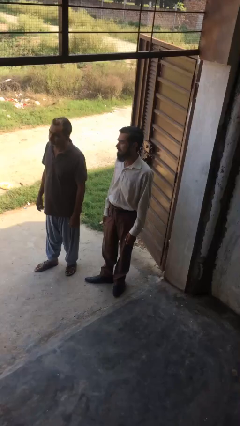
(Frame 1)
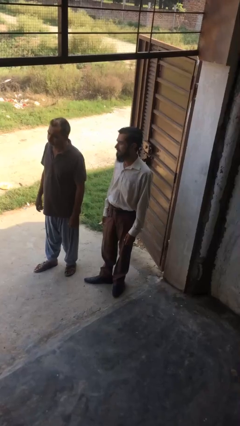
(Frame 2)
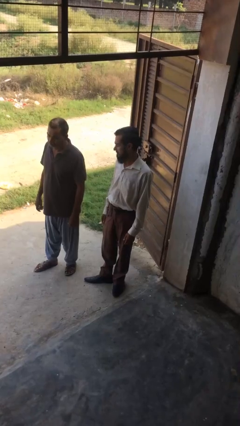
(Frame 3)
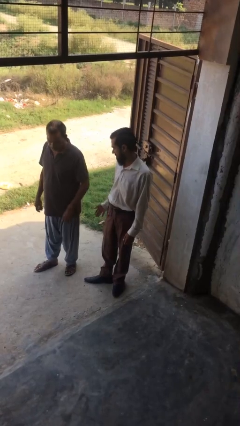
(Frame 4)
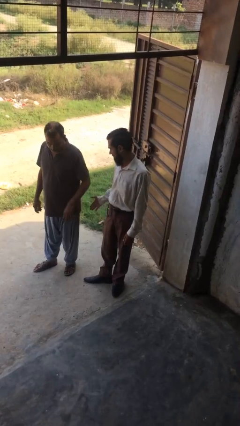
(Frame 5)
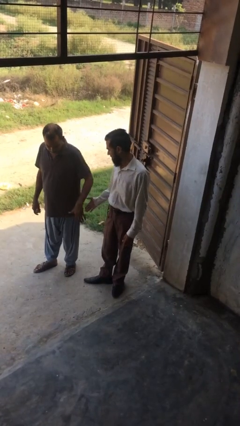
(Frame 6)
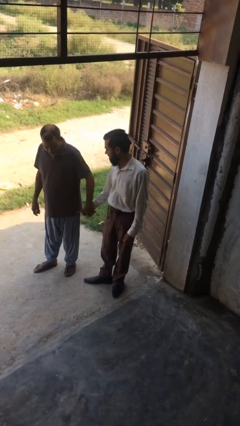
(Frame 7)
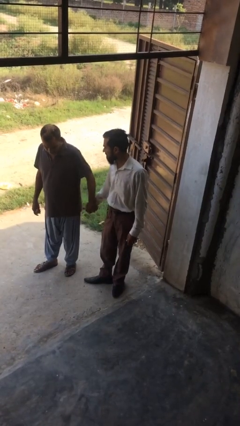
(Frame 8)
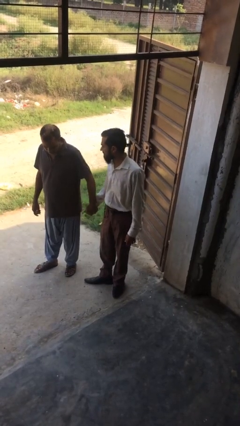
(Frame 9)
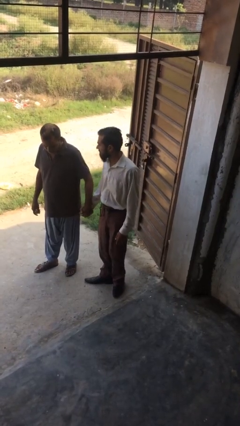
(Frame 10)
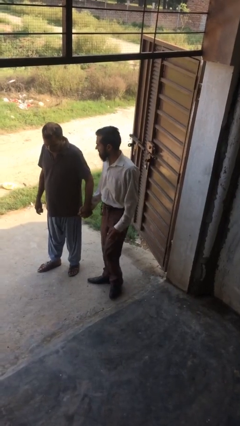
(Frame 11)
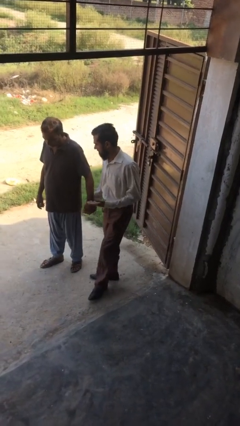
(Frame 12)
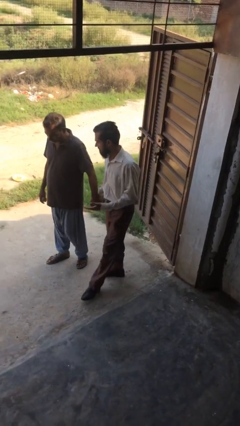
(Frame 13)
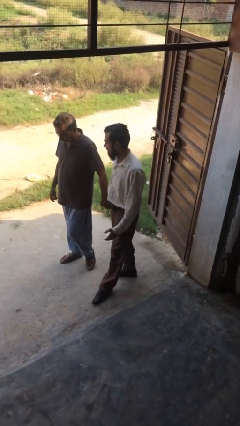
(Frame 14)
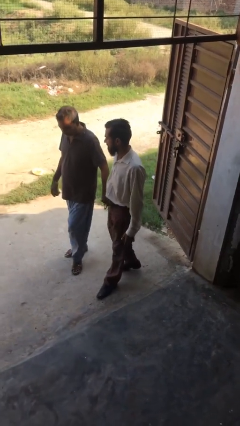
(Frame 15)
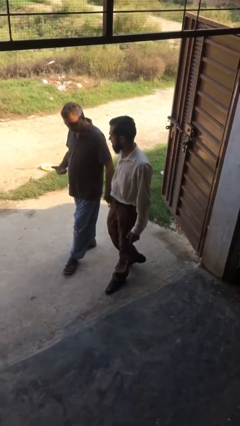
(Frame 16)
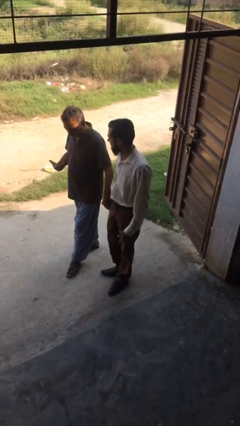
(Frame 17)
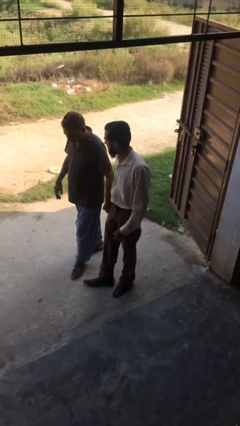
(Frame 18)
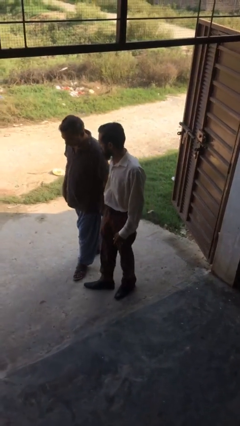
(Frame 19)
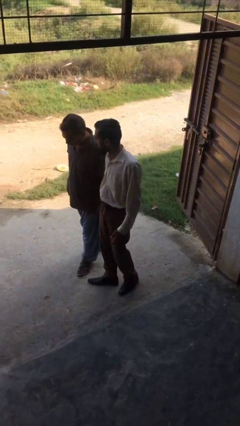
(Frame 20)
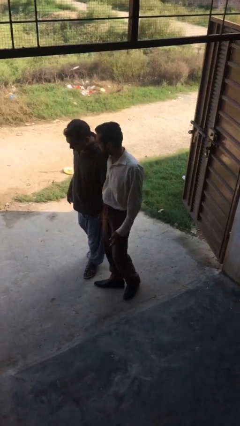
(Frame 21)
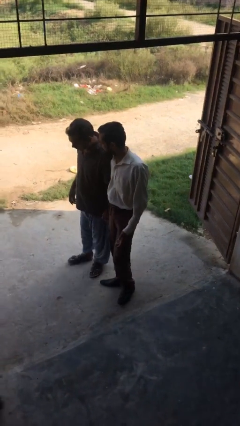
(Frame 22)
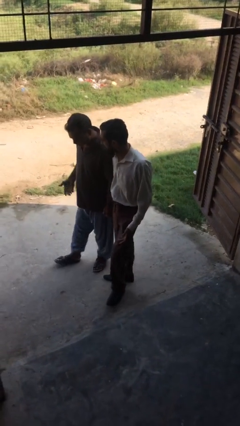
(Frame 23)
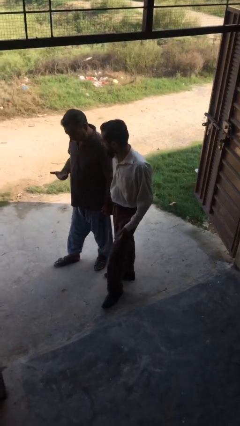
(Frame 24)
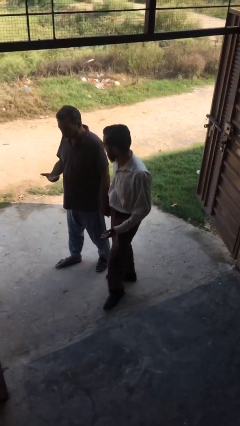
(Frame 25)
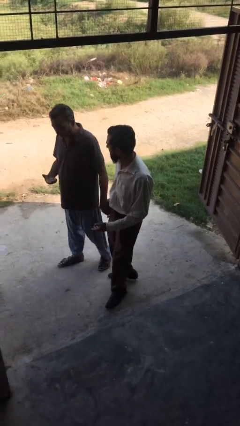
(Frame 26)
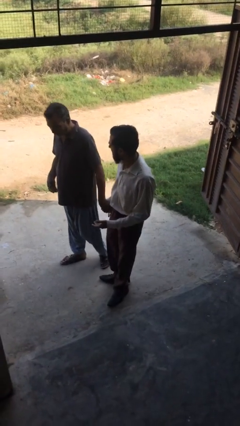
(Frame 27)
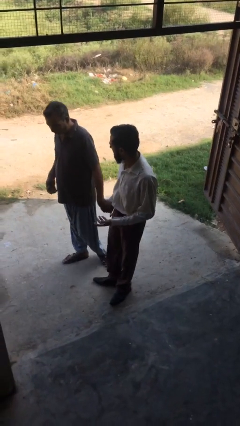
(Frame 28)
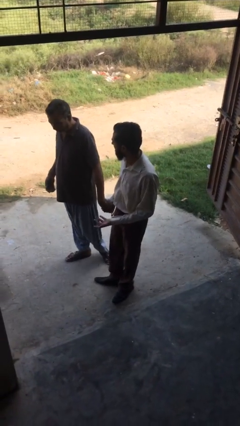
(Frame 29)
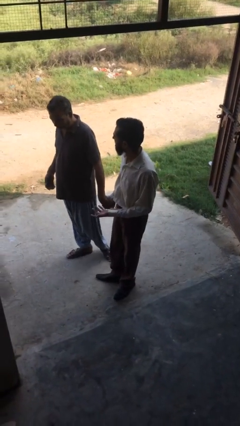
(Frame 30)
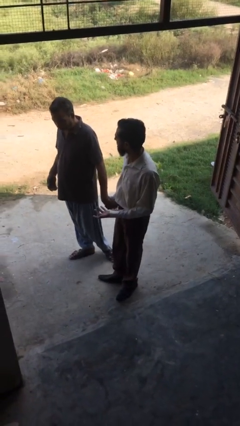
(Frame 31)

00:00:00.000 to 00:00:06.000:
person holds hand

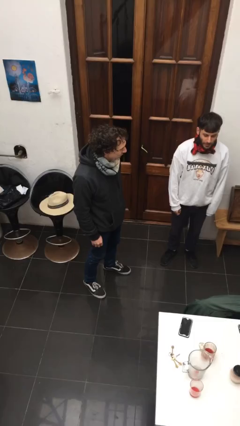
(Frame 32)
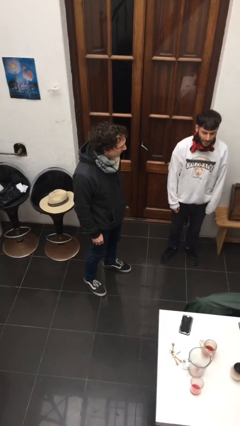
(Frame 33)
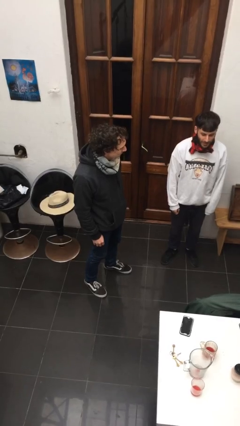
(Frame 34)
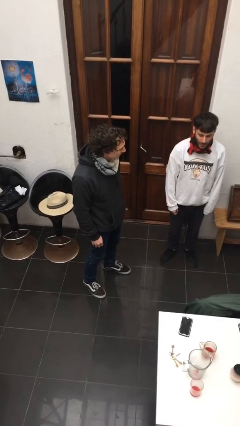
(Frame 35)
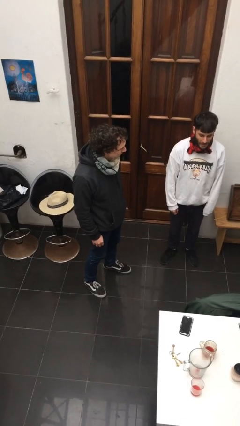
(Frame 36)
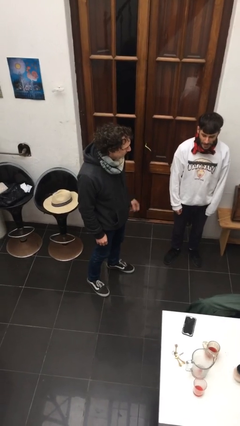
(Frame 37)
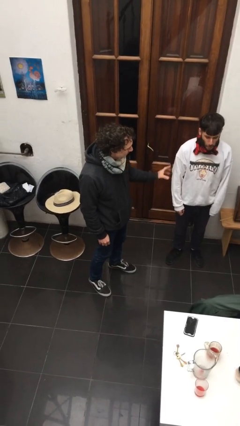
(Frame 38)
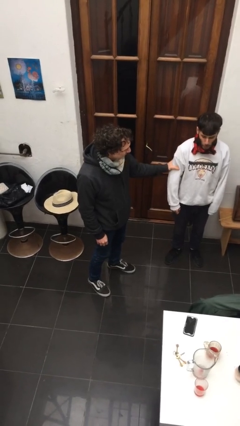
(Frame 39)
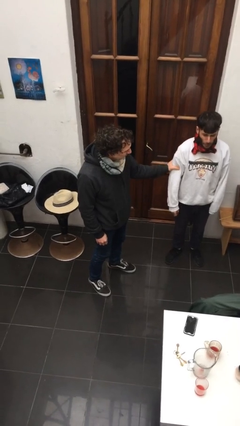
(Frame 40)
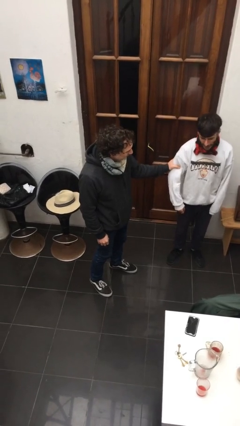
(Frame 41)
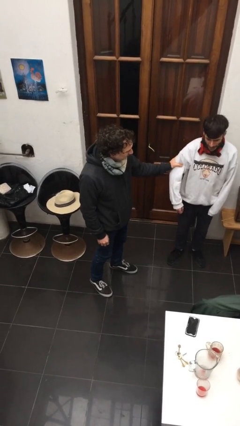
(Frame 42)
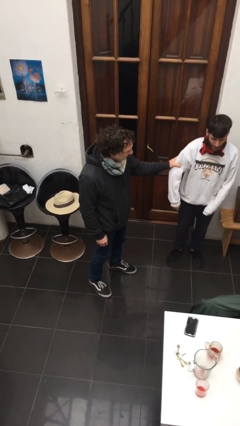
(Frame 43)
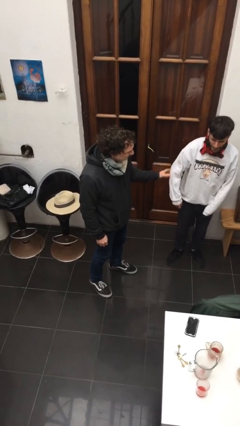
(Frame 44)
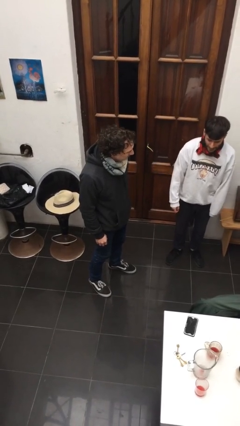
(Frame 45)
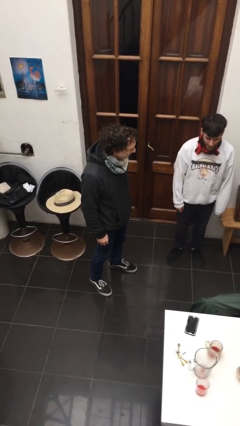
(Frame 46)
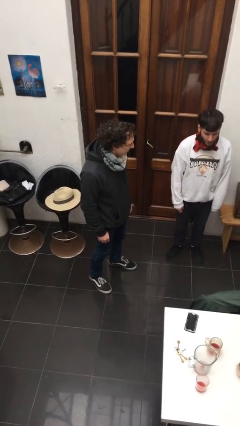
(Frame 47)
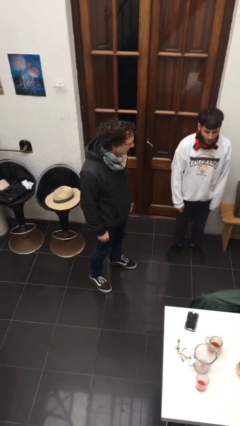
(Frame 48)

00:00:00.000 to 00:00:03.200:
person grabs person by bicep

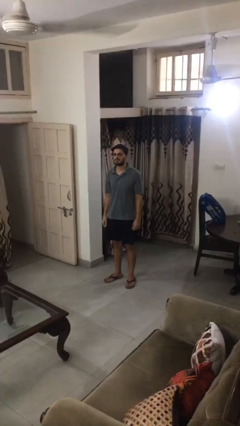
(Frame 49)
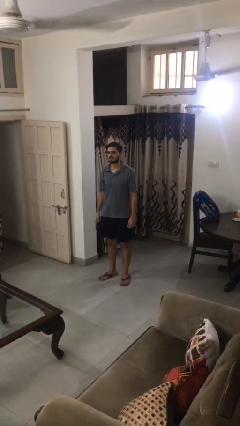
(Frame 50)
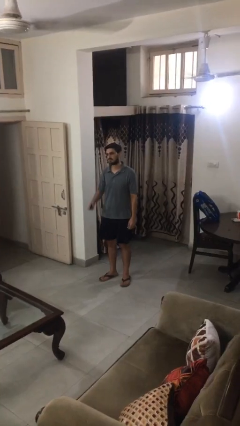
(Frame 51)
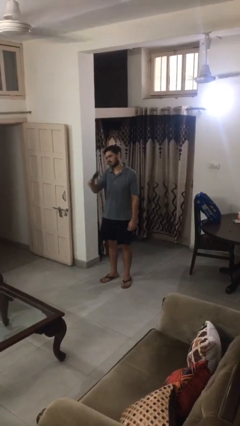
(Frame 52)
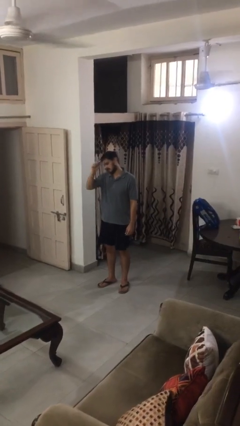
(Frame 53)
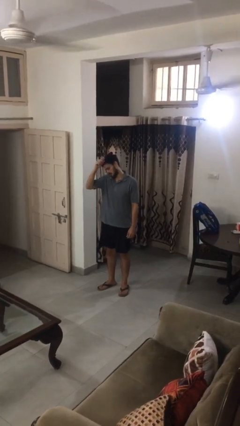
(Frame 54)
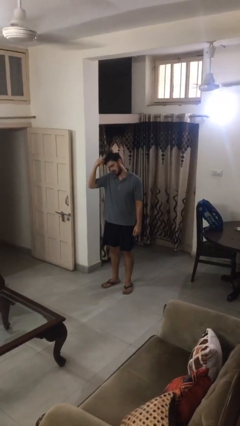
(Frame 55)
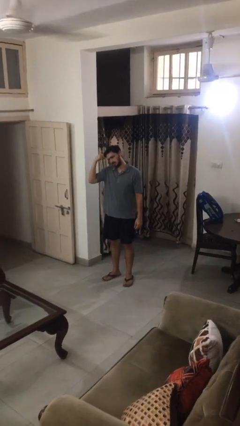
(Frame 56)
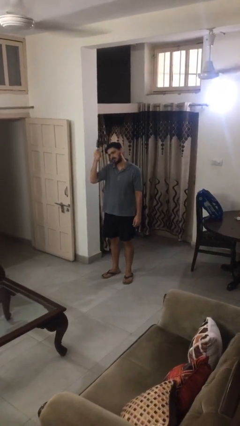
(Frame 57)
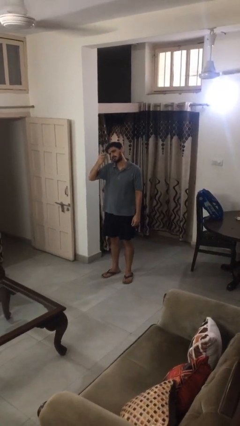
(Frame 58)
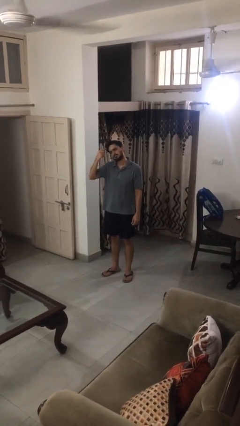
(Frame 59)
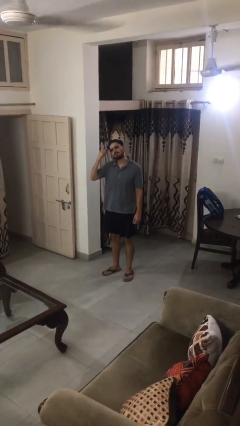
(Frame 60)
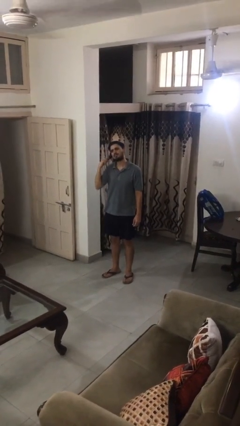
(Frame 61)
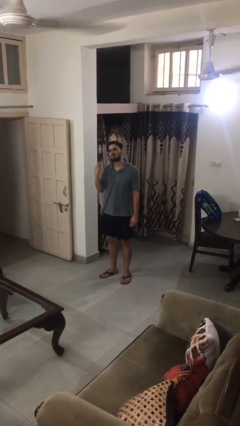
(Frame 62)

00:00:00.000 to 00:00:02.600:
person brushes hair

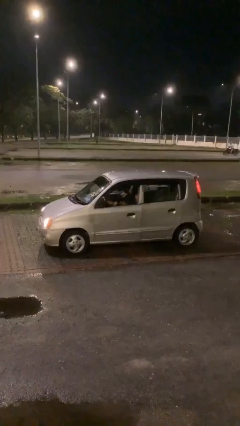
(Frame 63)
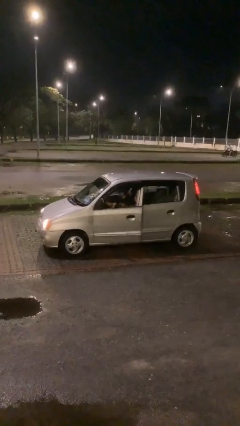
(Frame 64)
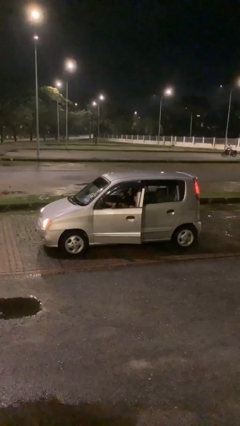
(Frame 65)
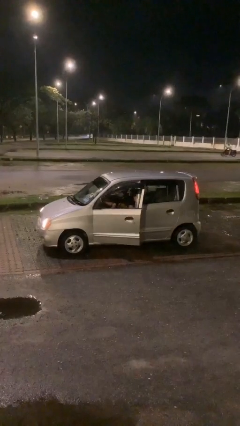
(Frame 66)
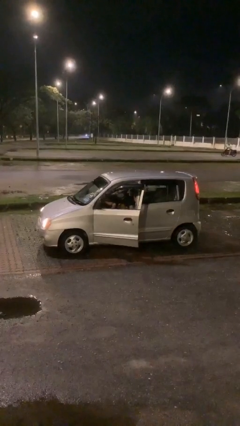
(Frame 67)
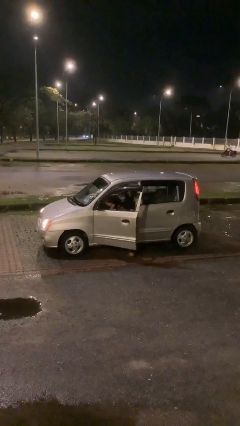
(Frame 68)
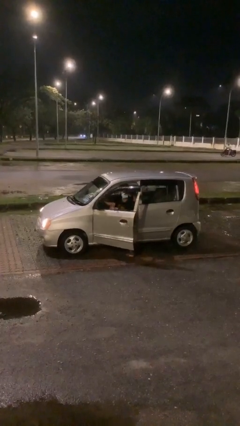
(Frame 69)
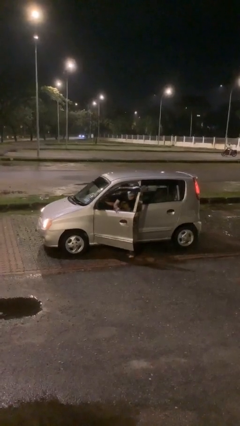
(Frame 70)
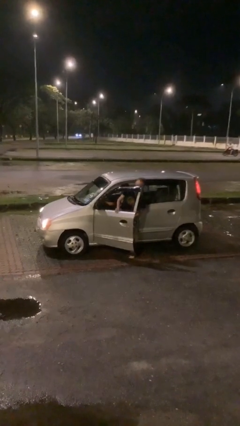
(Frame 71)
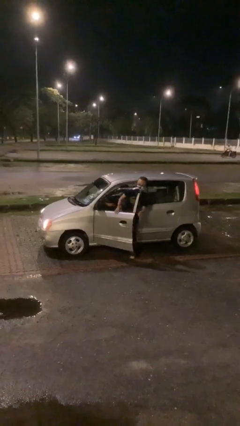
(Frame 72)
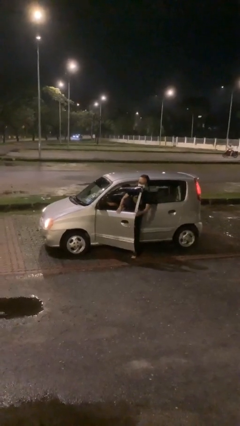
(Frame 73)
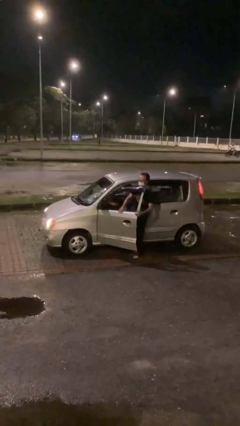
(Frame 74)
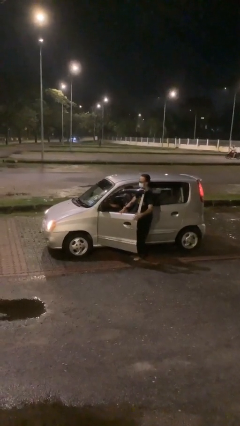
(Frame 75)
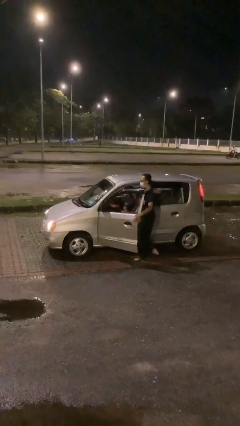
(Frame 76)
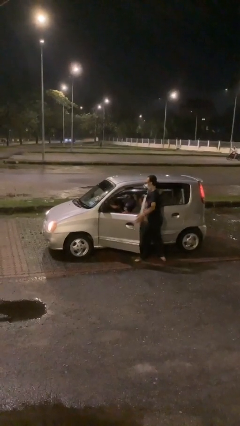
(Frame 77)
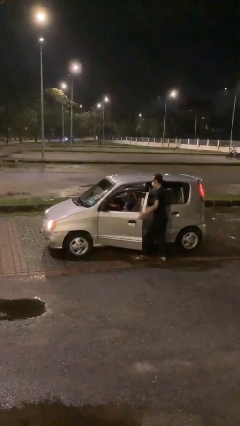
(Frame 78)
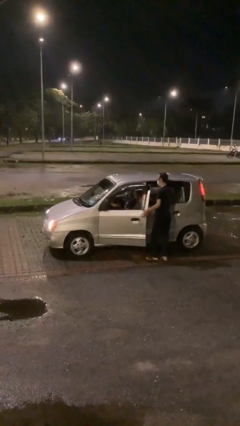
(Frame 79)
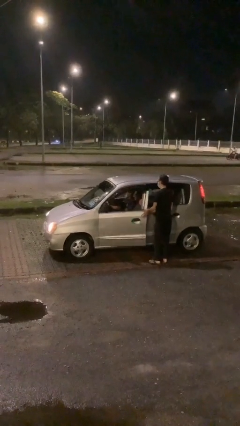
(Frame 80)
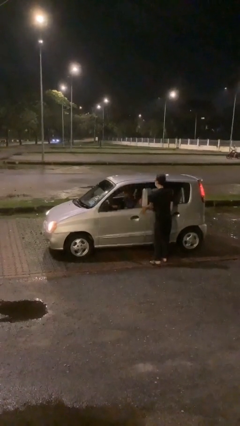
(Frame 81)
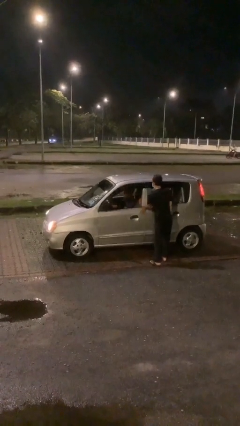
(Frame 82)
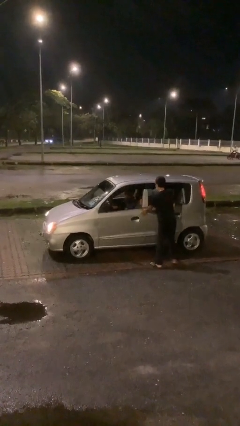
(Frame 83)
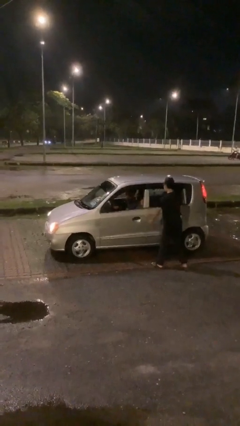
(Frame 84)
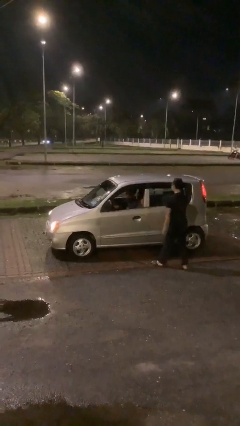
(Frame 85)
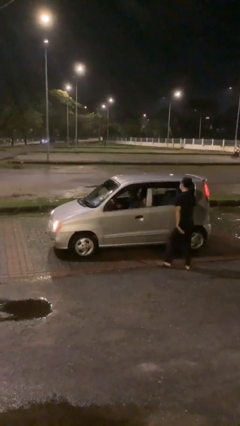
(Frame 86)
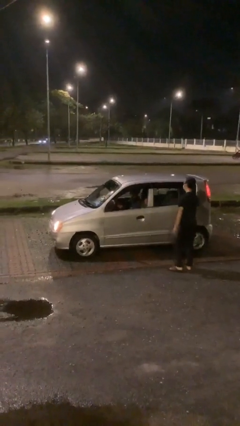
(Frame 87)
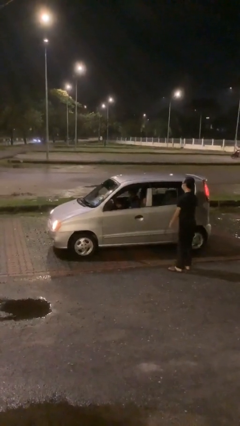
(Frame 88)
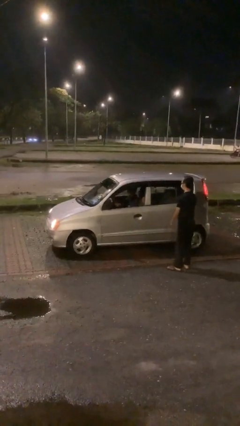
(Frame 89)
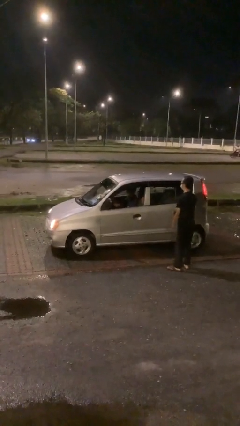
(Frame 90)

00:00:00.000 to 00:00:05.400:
car drops off person

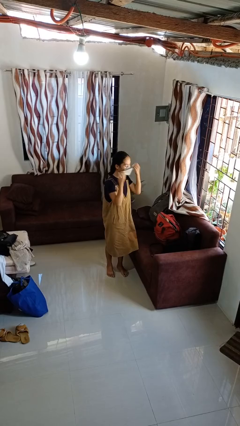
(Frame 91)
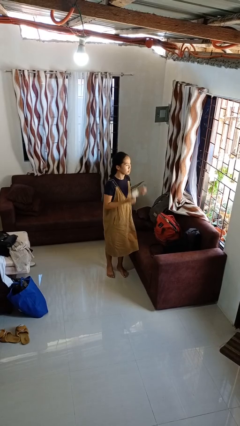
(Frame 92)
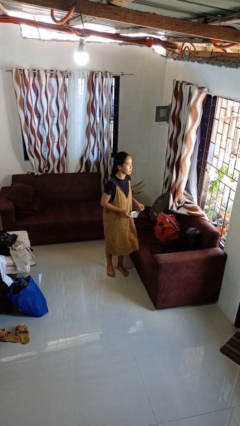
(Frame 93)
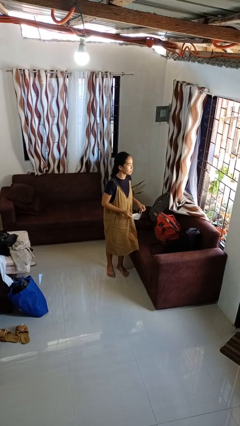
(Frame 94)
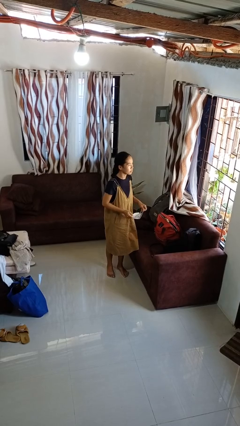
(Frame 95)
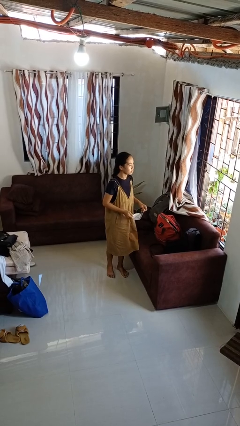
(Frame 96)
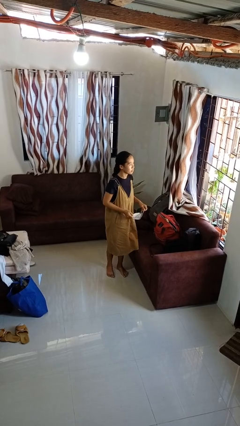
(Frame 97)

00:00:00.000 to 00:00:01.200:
person takes off facemask
